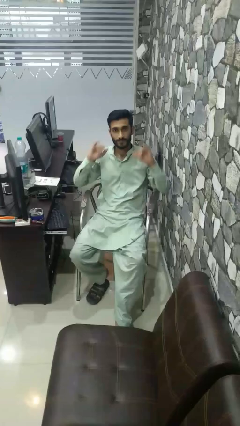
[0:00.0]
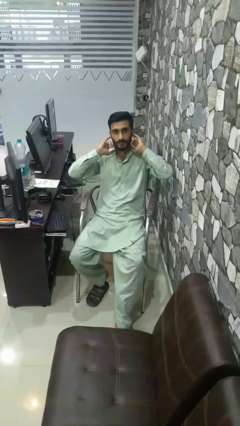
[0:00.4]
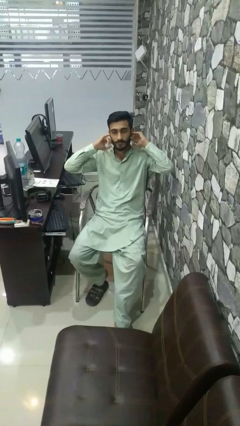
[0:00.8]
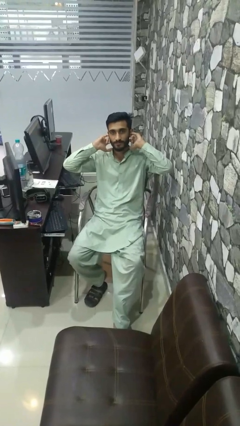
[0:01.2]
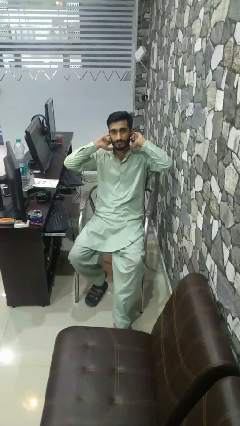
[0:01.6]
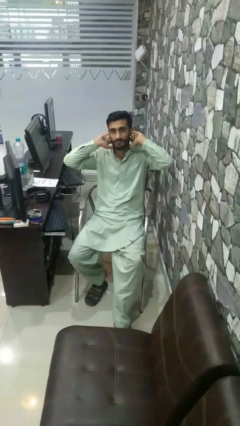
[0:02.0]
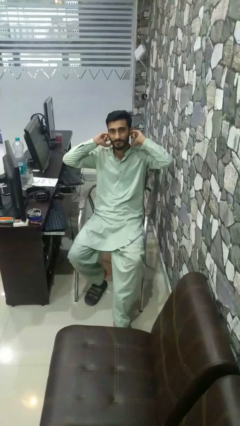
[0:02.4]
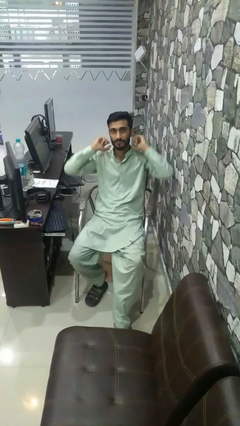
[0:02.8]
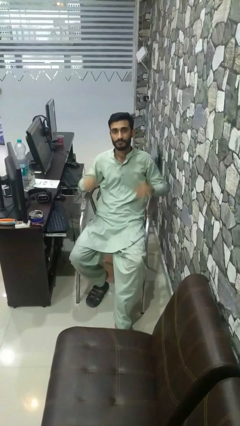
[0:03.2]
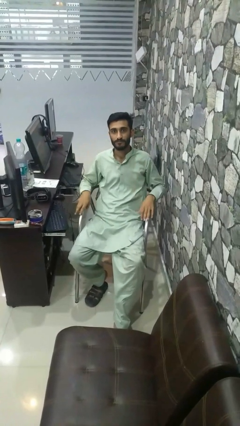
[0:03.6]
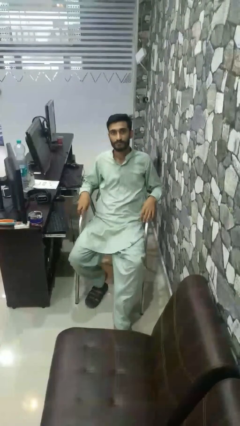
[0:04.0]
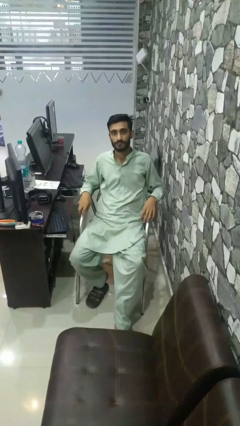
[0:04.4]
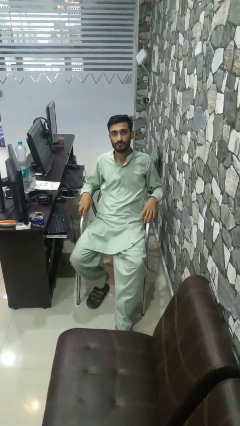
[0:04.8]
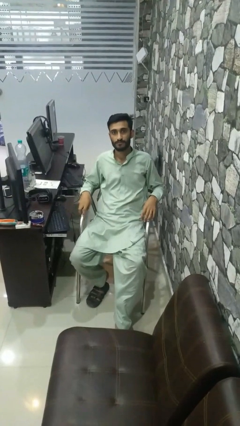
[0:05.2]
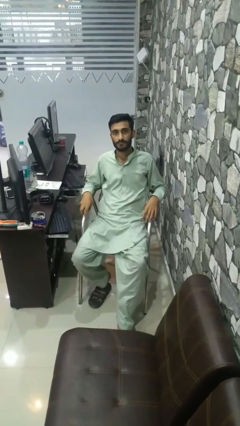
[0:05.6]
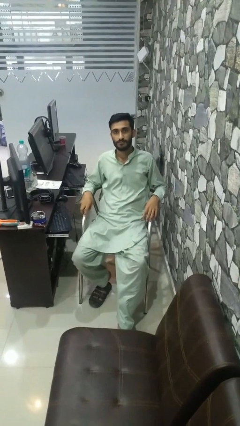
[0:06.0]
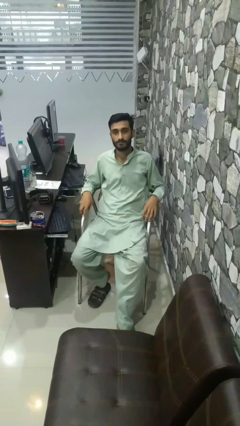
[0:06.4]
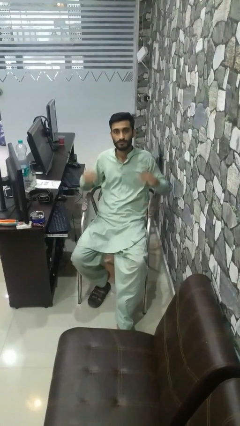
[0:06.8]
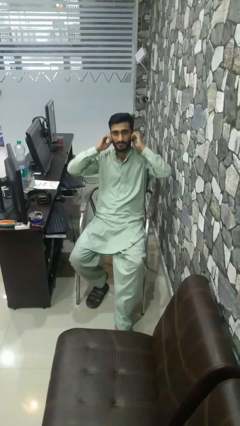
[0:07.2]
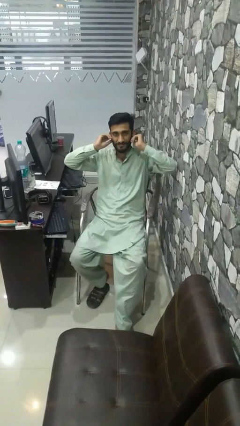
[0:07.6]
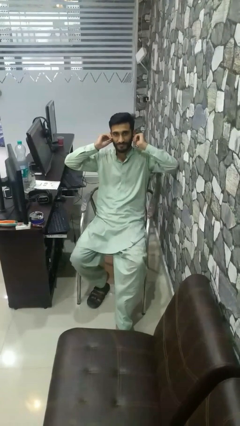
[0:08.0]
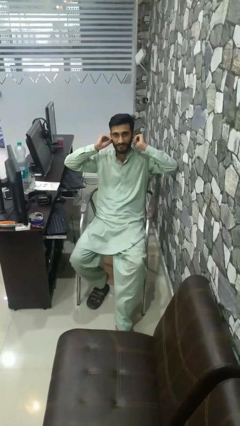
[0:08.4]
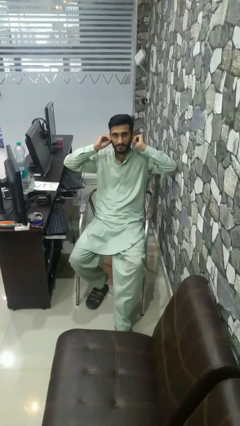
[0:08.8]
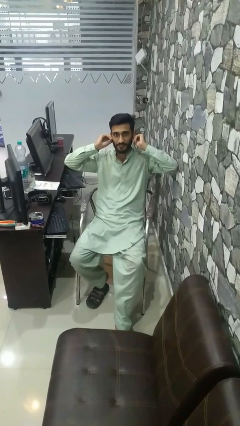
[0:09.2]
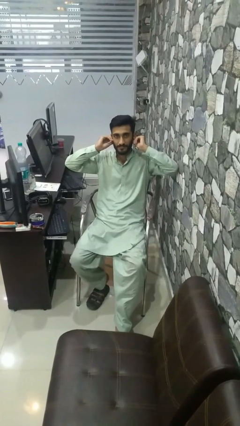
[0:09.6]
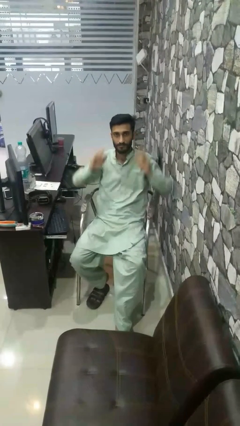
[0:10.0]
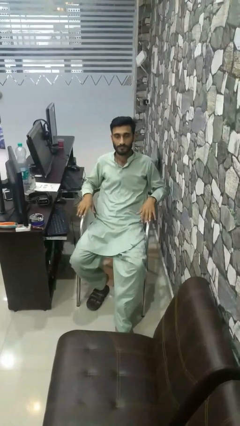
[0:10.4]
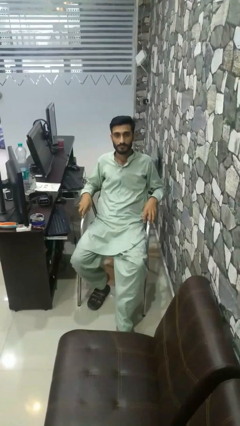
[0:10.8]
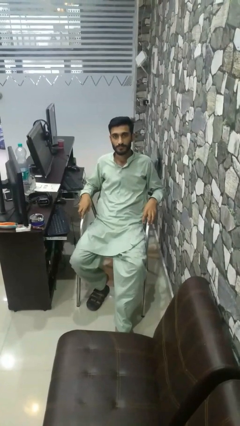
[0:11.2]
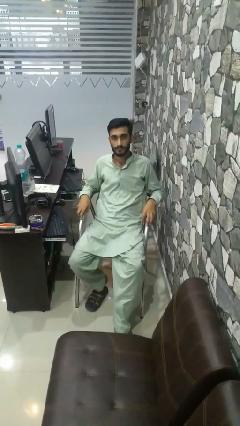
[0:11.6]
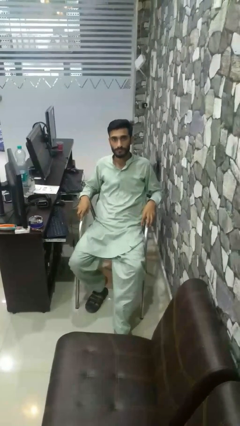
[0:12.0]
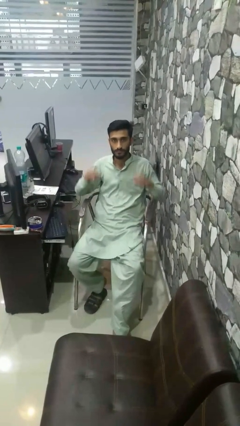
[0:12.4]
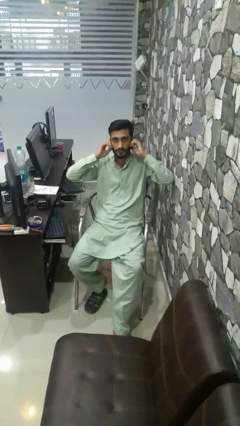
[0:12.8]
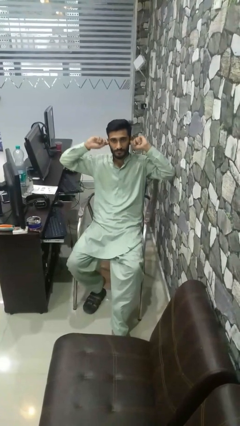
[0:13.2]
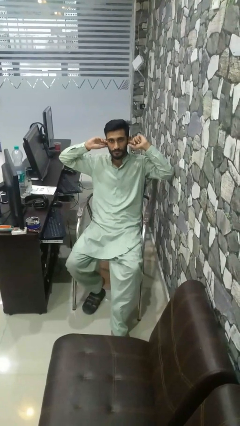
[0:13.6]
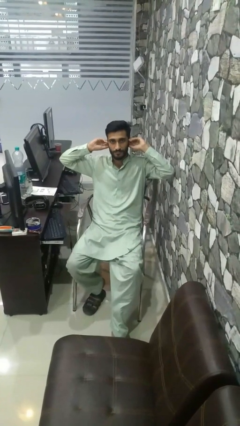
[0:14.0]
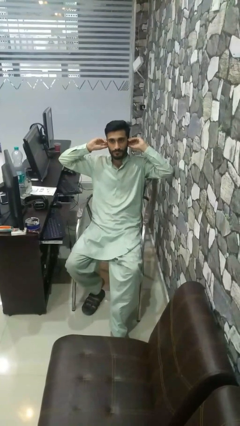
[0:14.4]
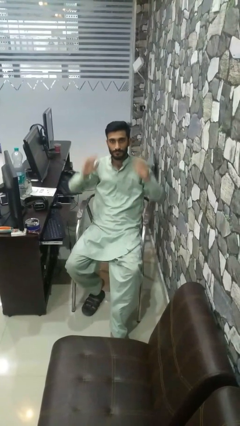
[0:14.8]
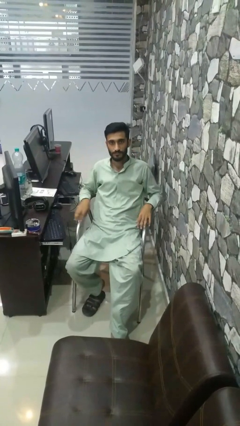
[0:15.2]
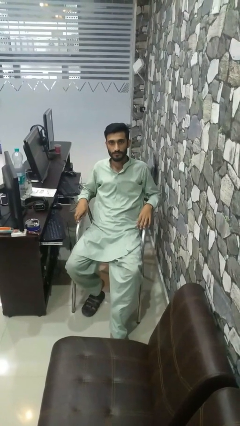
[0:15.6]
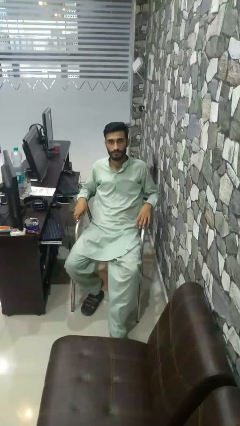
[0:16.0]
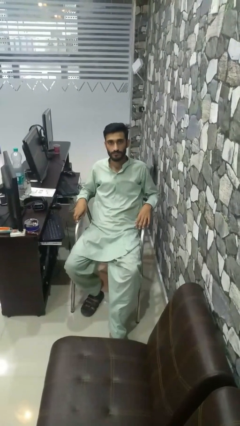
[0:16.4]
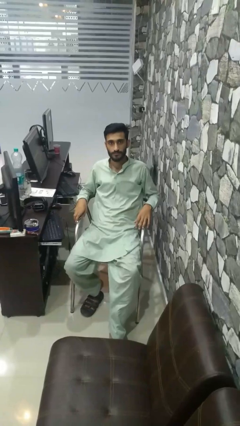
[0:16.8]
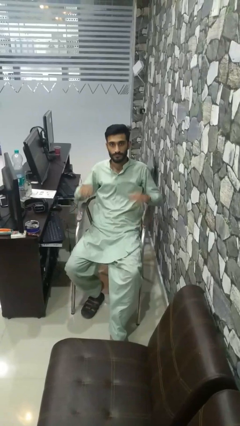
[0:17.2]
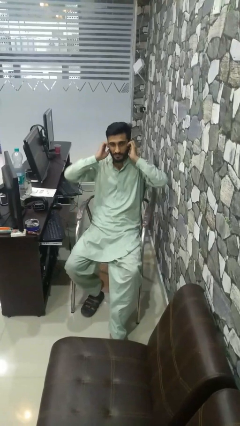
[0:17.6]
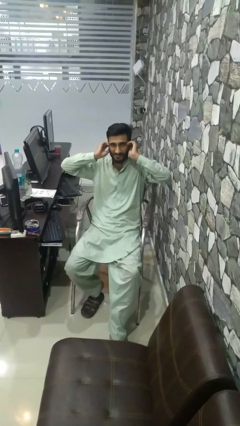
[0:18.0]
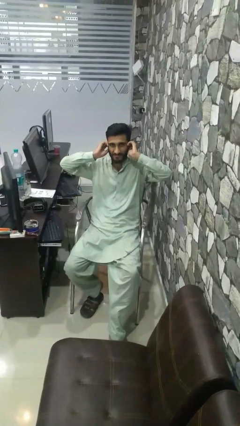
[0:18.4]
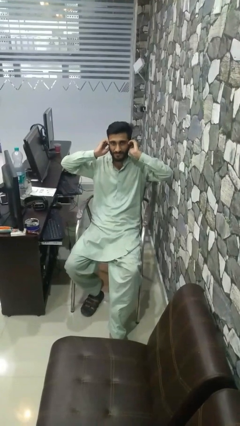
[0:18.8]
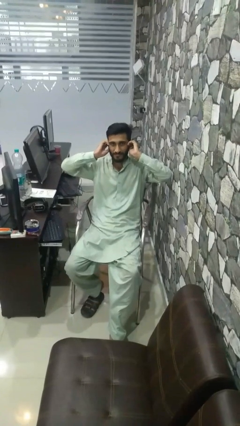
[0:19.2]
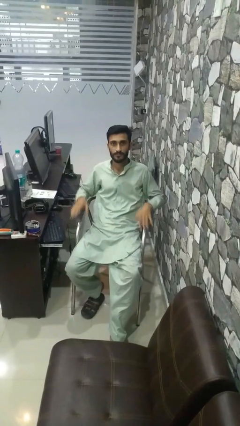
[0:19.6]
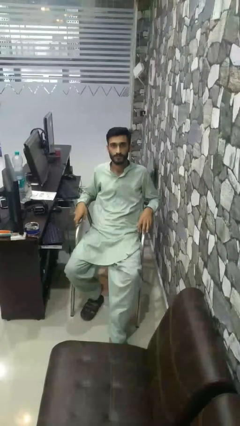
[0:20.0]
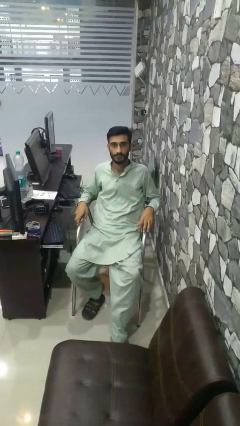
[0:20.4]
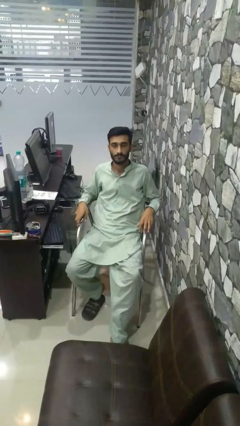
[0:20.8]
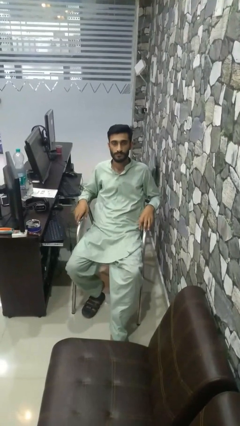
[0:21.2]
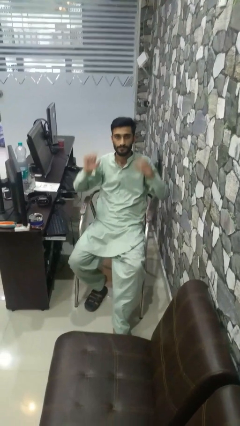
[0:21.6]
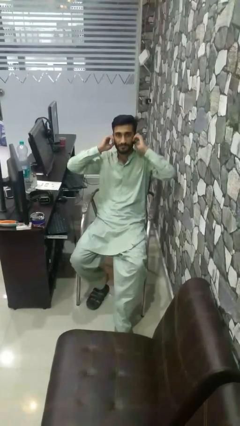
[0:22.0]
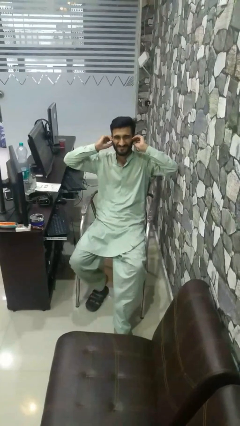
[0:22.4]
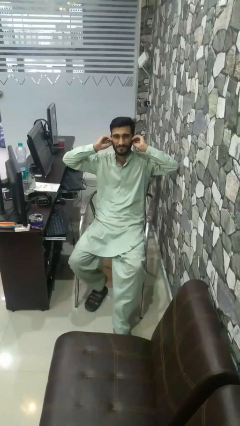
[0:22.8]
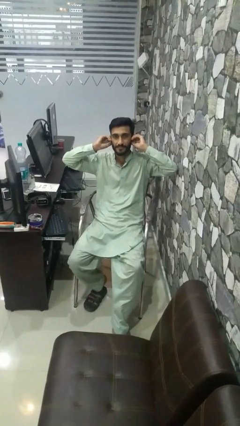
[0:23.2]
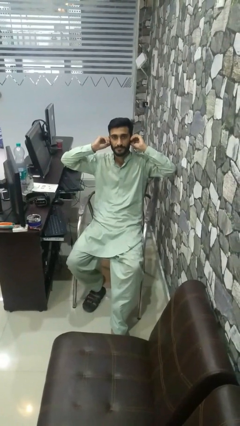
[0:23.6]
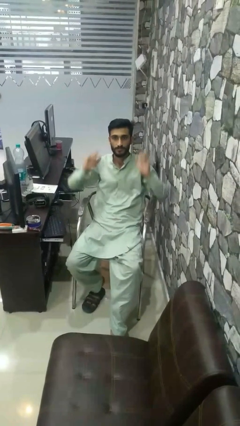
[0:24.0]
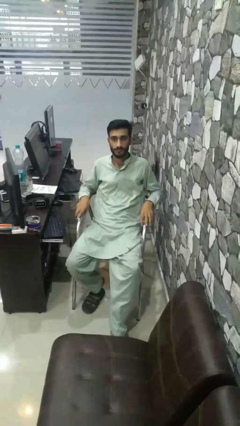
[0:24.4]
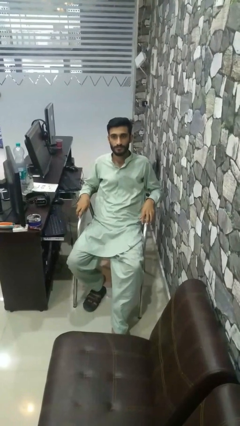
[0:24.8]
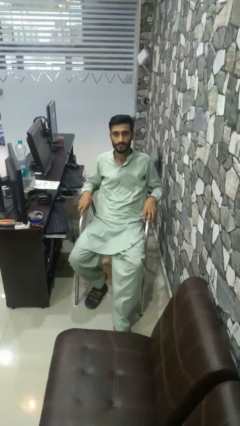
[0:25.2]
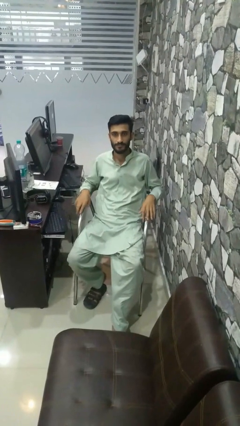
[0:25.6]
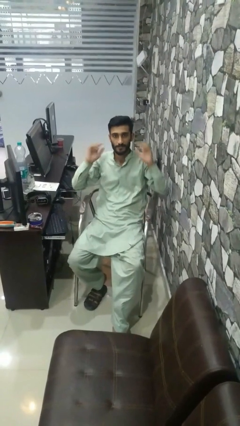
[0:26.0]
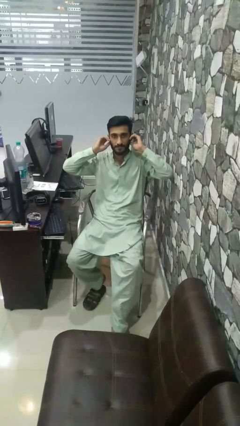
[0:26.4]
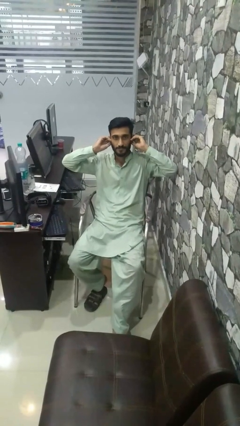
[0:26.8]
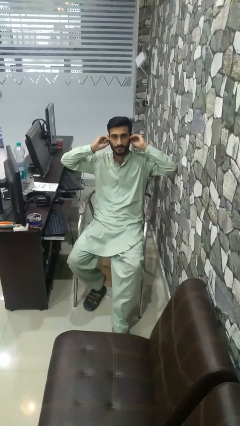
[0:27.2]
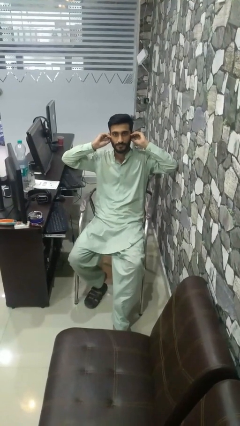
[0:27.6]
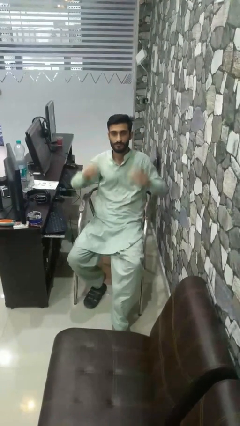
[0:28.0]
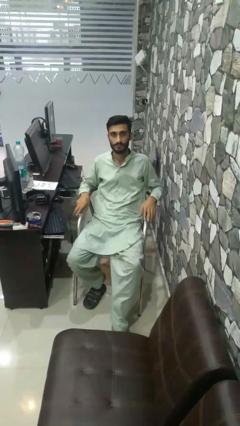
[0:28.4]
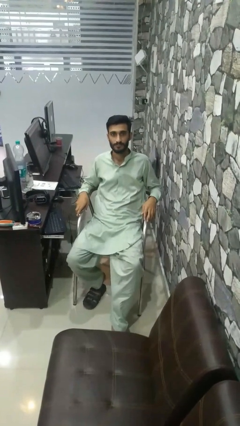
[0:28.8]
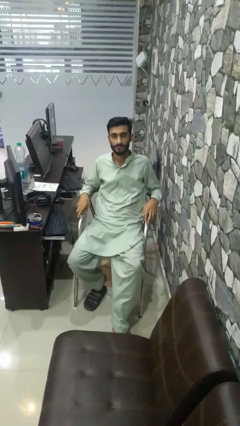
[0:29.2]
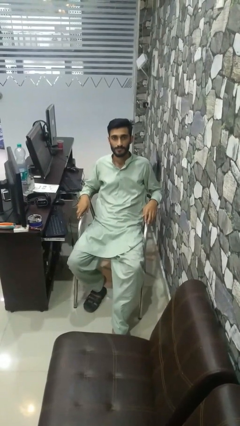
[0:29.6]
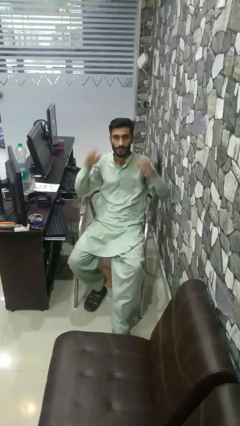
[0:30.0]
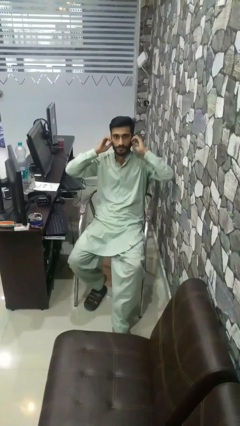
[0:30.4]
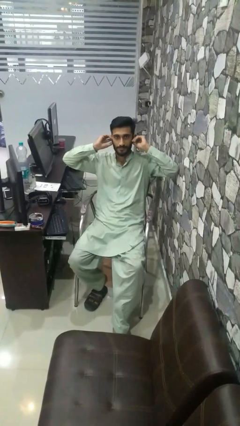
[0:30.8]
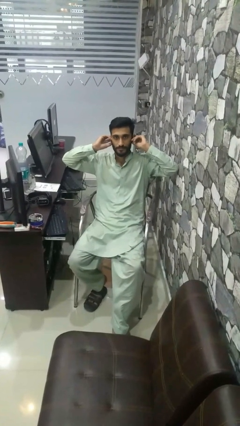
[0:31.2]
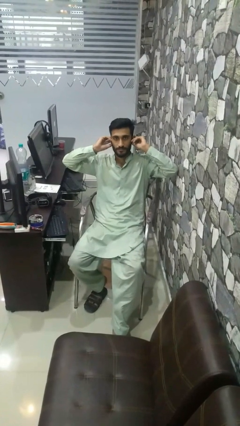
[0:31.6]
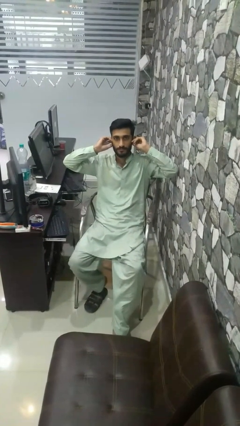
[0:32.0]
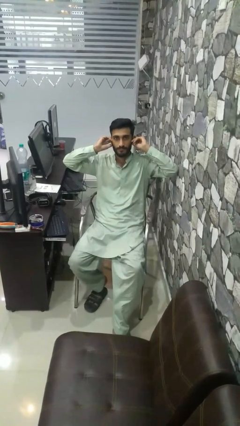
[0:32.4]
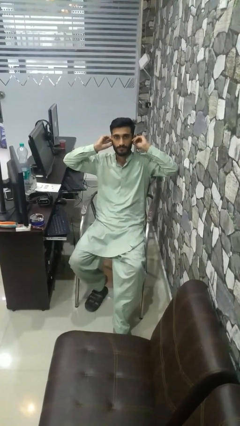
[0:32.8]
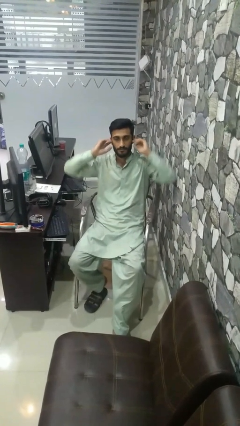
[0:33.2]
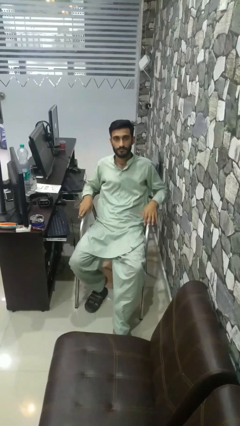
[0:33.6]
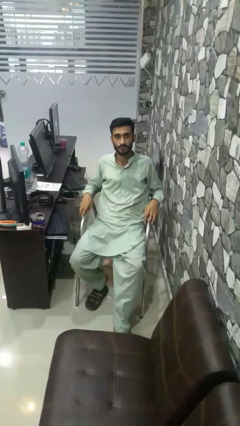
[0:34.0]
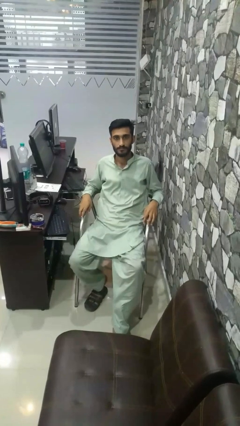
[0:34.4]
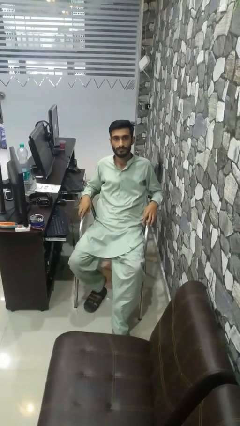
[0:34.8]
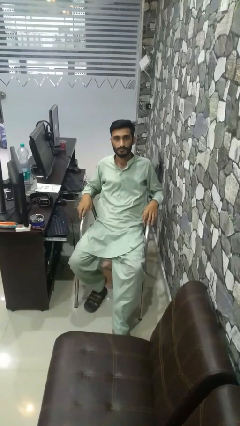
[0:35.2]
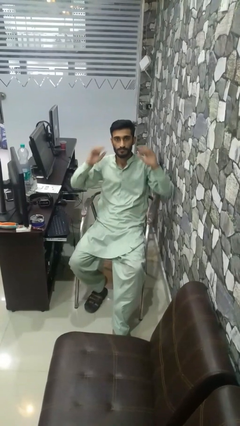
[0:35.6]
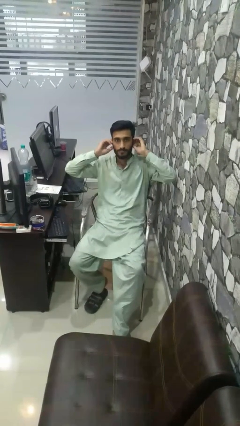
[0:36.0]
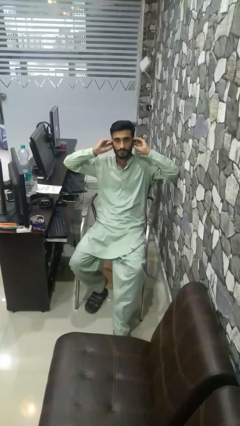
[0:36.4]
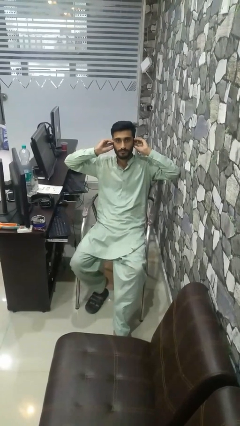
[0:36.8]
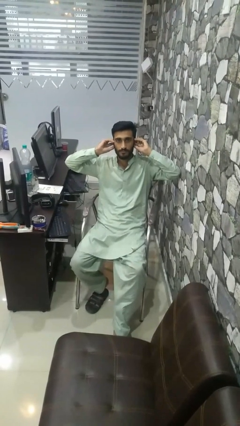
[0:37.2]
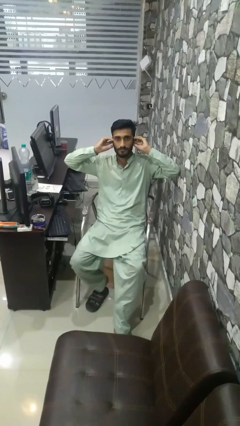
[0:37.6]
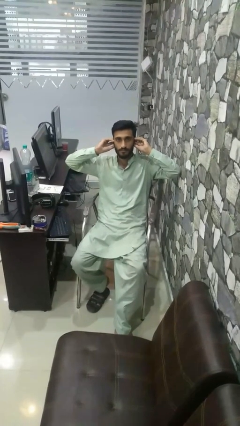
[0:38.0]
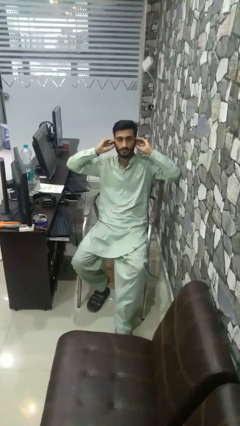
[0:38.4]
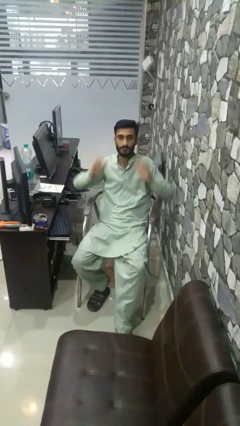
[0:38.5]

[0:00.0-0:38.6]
person puts fingers in ear
